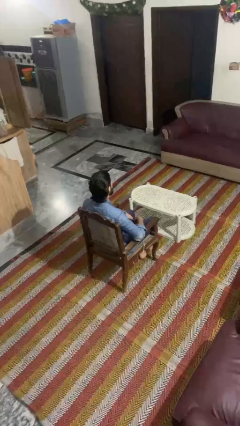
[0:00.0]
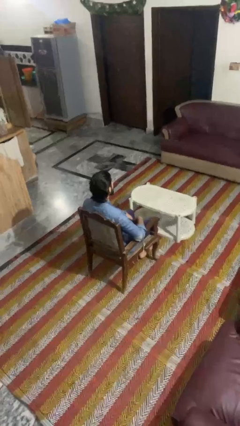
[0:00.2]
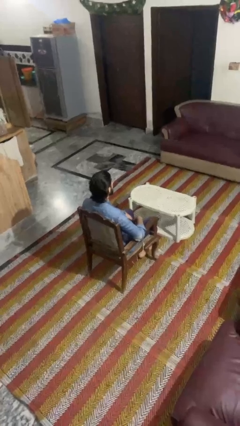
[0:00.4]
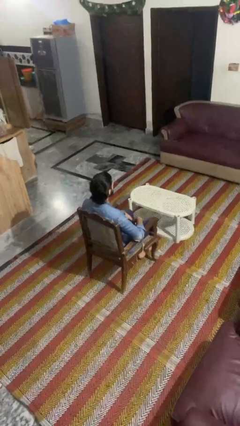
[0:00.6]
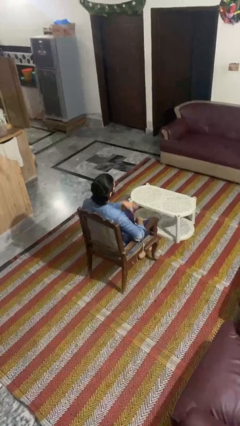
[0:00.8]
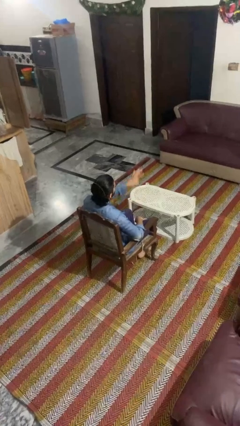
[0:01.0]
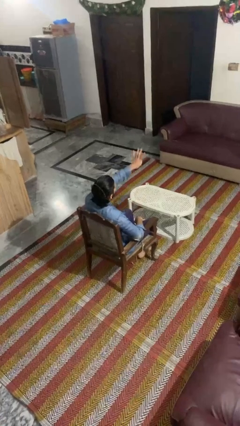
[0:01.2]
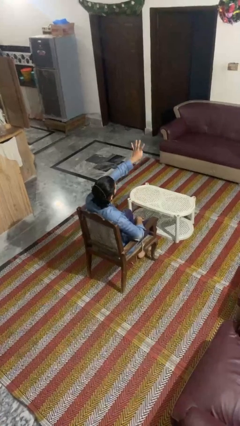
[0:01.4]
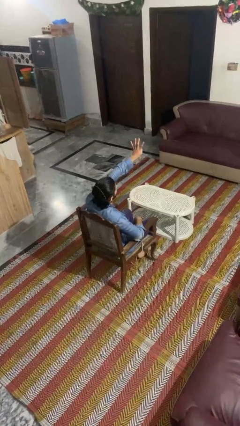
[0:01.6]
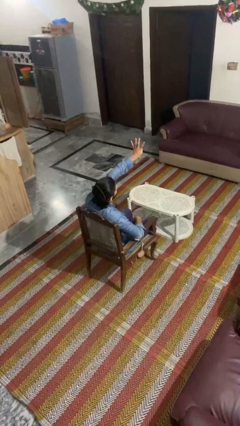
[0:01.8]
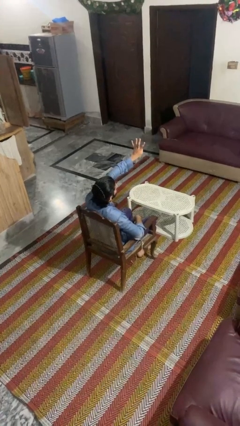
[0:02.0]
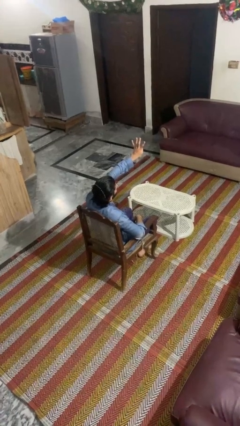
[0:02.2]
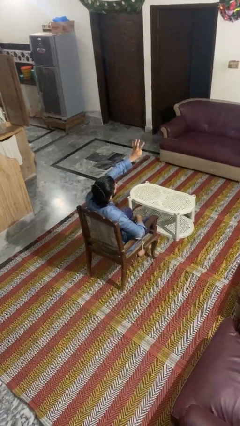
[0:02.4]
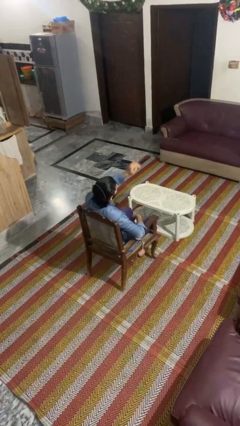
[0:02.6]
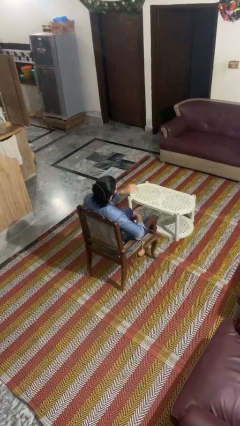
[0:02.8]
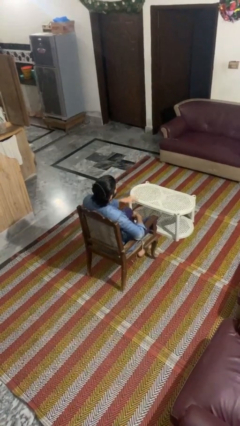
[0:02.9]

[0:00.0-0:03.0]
person gestures number four

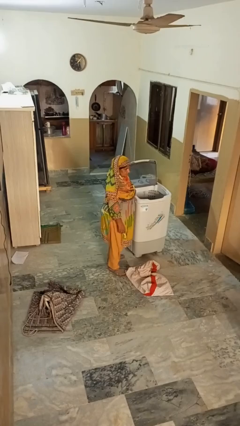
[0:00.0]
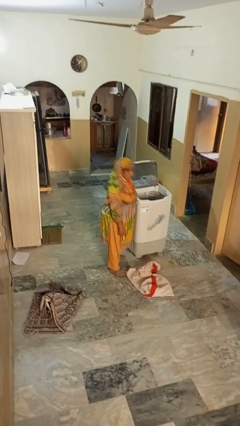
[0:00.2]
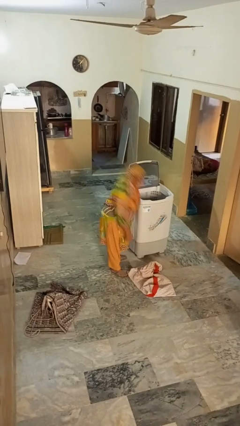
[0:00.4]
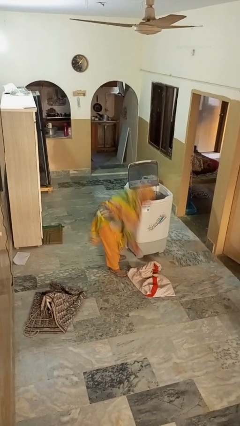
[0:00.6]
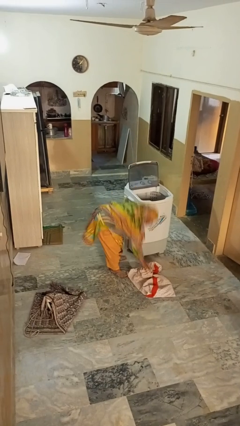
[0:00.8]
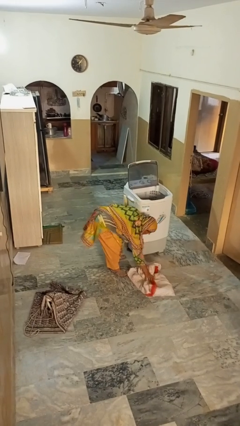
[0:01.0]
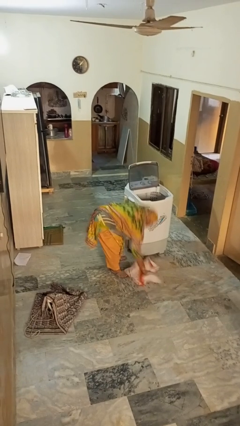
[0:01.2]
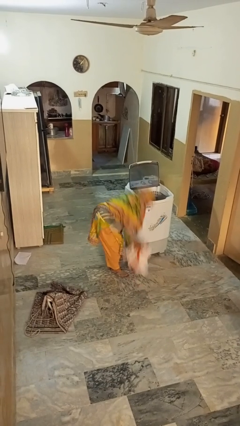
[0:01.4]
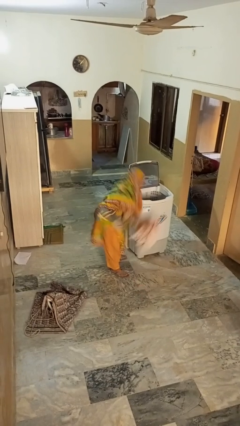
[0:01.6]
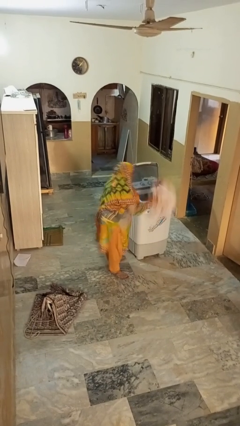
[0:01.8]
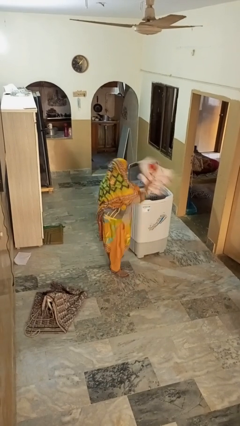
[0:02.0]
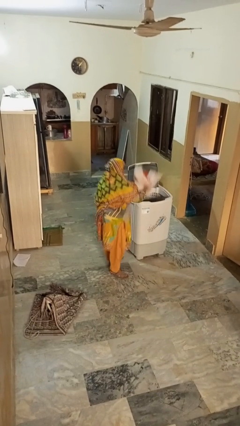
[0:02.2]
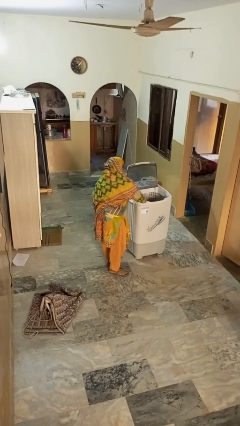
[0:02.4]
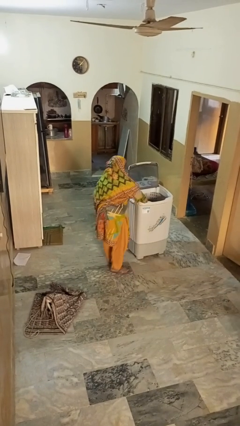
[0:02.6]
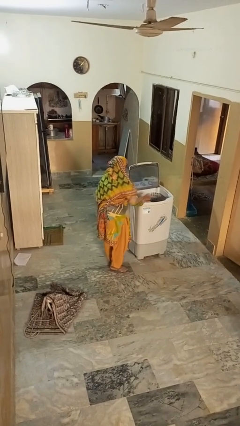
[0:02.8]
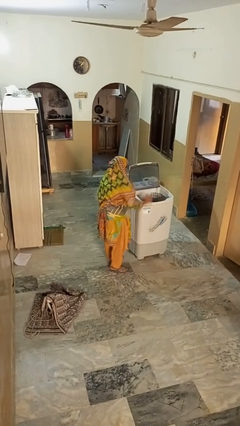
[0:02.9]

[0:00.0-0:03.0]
person loads clotheswasher

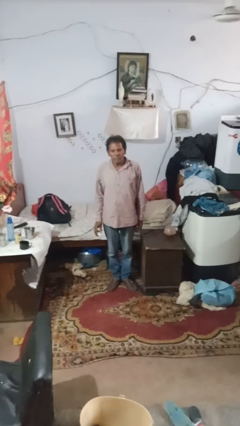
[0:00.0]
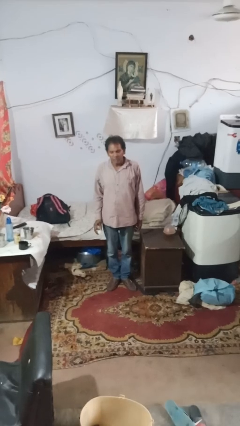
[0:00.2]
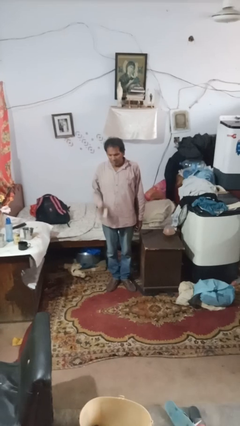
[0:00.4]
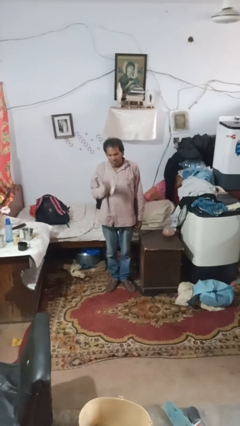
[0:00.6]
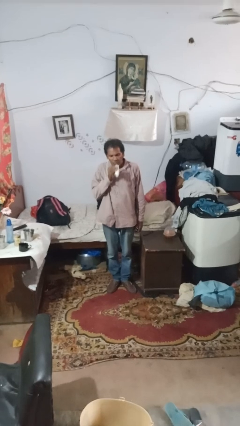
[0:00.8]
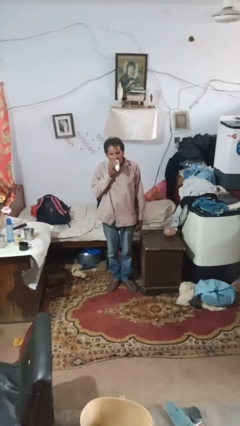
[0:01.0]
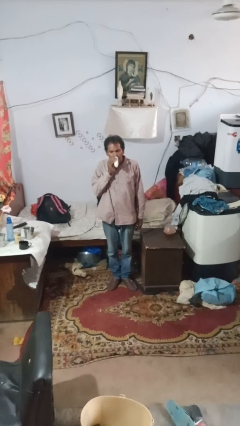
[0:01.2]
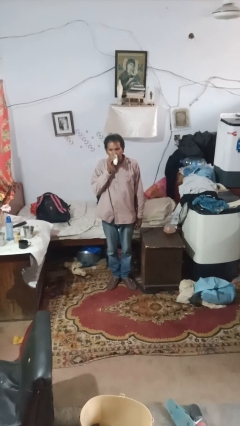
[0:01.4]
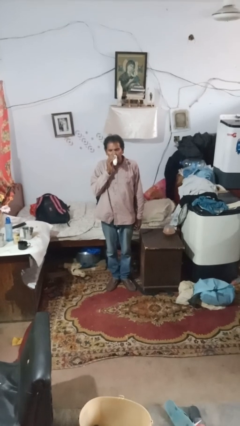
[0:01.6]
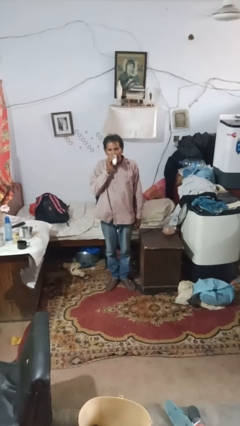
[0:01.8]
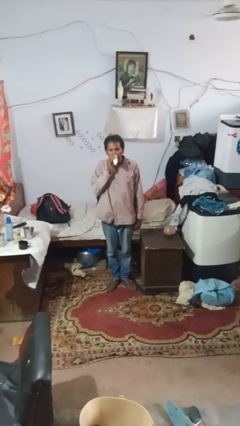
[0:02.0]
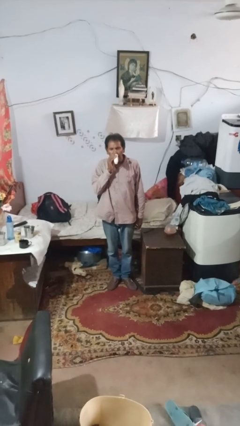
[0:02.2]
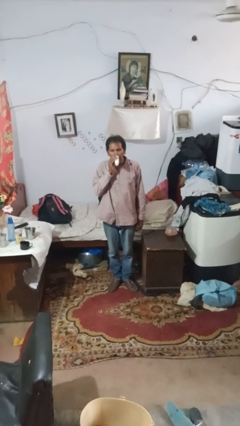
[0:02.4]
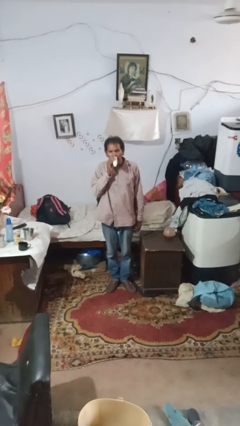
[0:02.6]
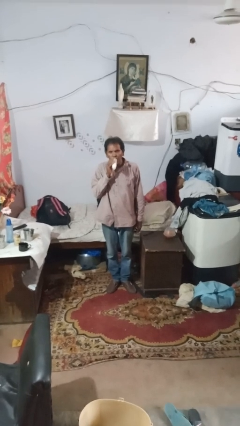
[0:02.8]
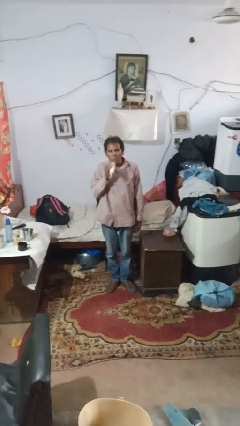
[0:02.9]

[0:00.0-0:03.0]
person vapes

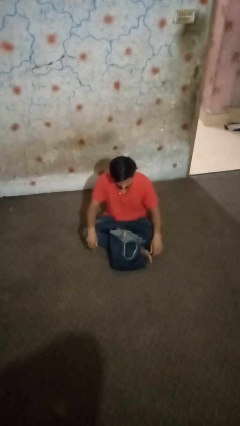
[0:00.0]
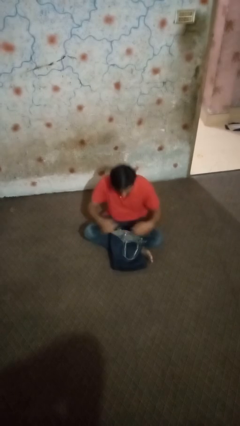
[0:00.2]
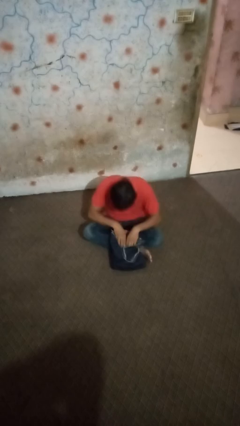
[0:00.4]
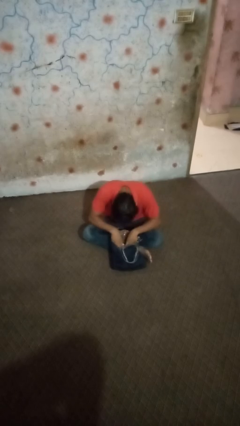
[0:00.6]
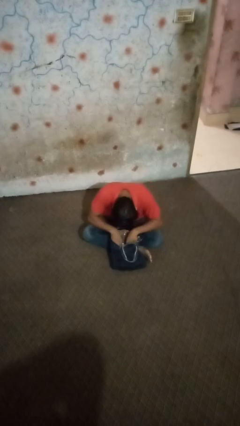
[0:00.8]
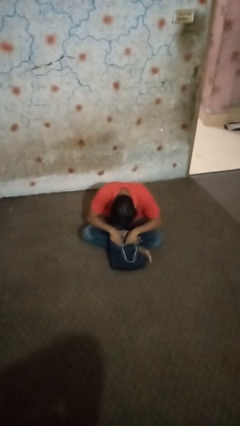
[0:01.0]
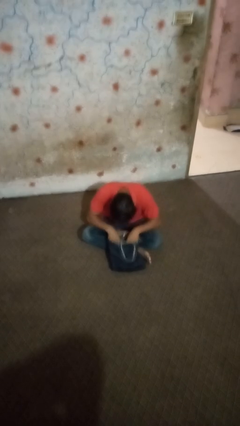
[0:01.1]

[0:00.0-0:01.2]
person searches in bag

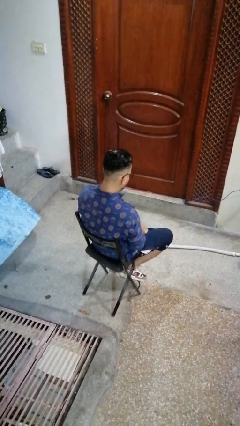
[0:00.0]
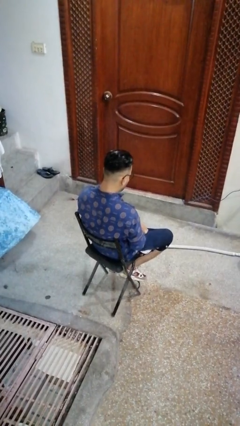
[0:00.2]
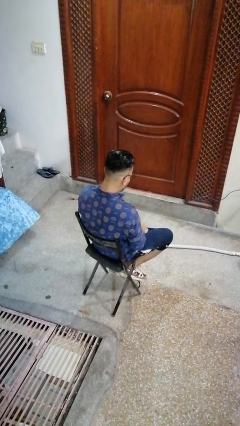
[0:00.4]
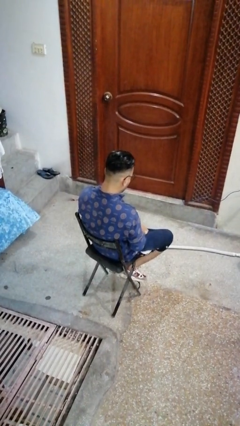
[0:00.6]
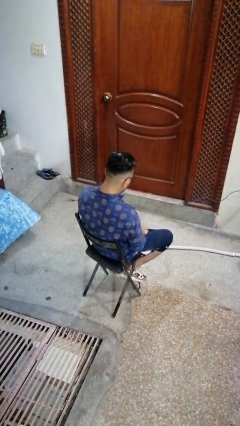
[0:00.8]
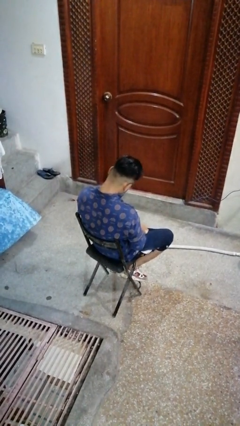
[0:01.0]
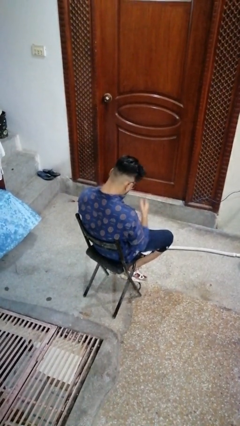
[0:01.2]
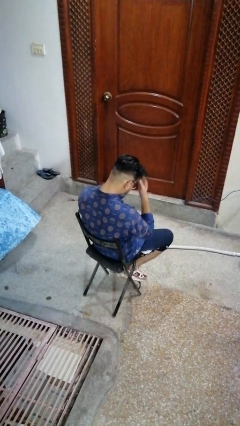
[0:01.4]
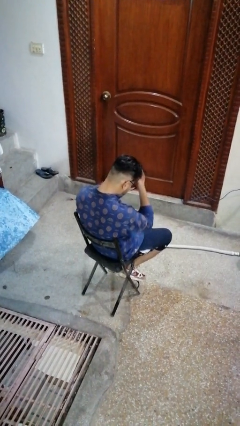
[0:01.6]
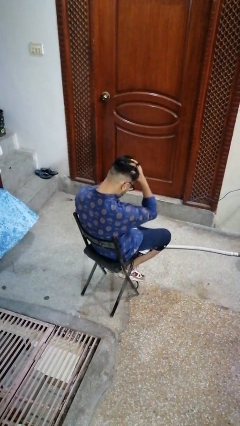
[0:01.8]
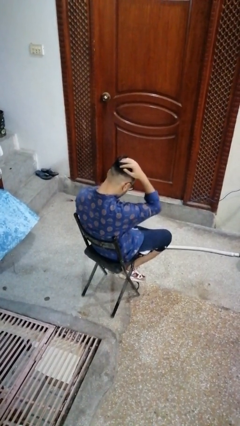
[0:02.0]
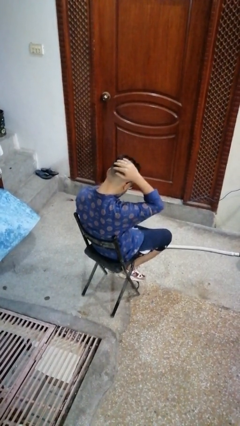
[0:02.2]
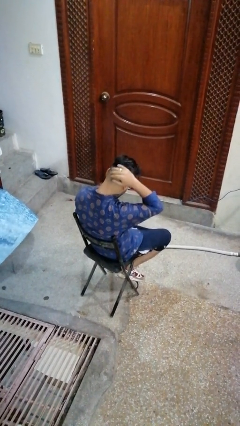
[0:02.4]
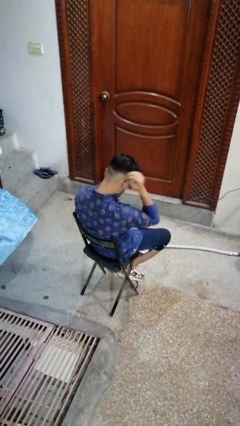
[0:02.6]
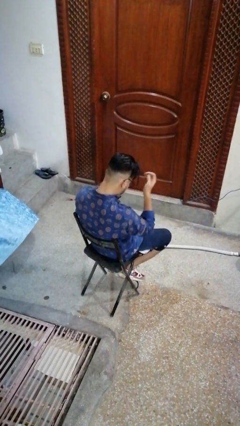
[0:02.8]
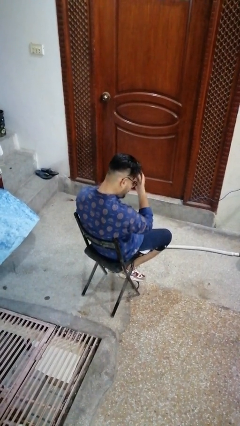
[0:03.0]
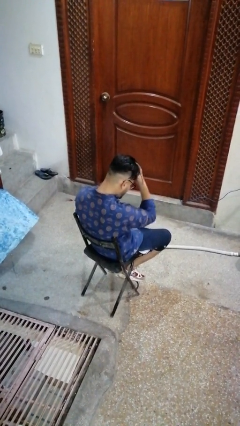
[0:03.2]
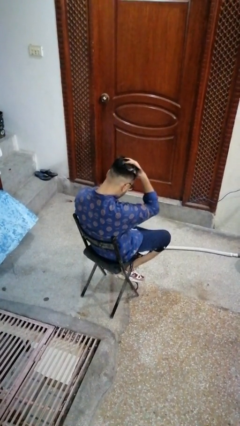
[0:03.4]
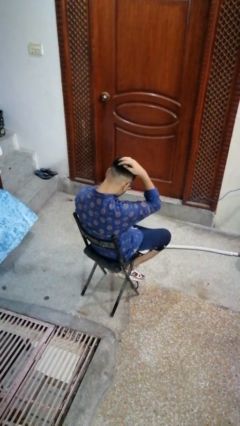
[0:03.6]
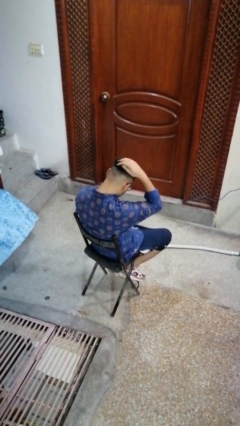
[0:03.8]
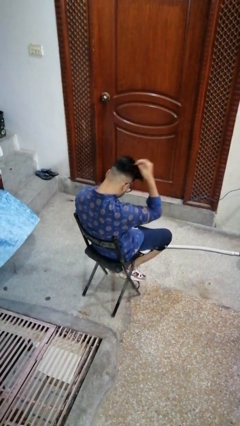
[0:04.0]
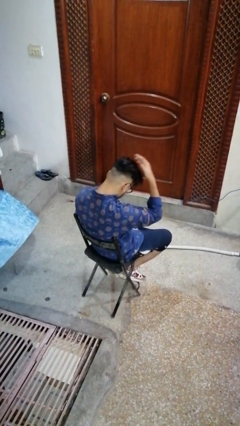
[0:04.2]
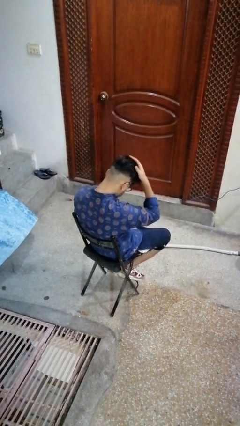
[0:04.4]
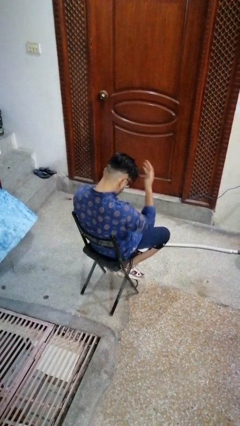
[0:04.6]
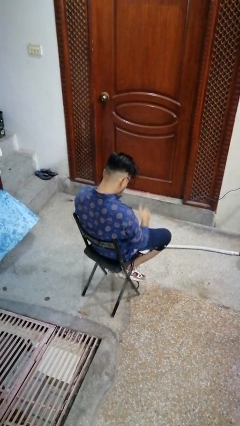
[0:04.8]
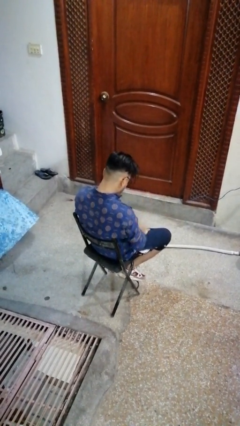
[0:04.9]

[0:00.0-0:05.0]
person strokes hair

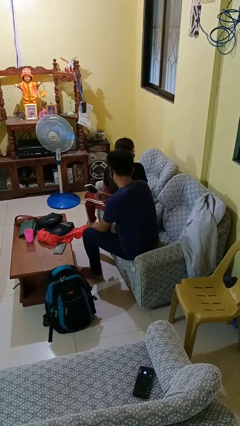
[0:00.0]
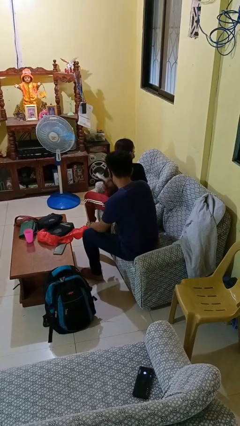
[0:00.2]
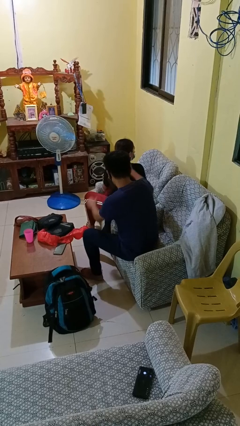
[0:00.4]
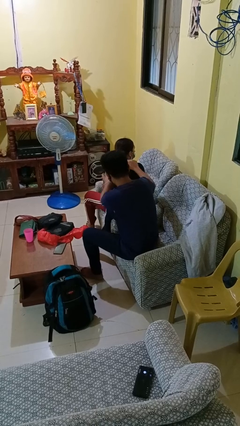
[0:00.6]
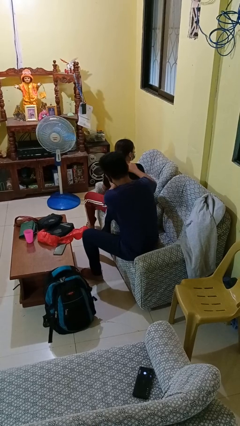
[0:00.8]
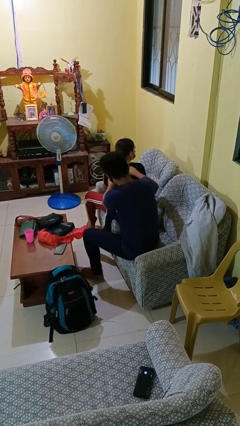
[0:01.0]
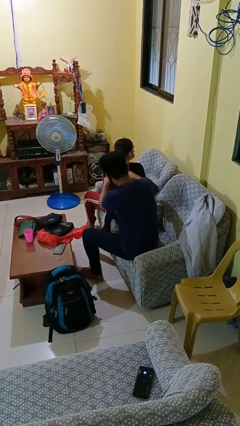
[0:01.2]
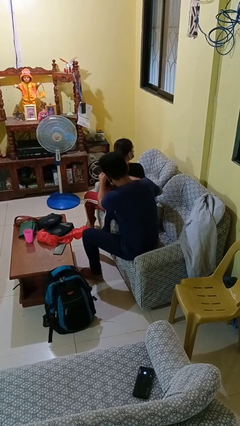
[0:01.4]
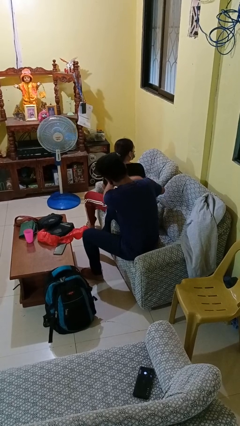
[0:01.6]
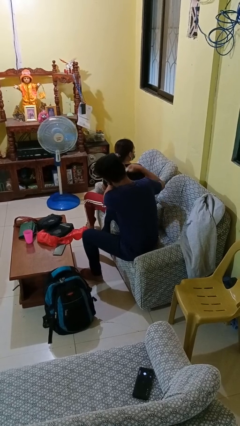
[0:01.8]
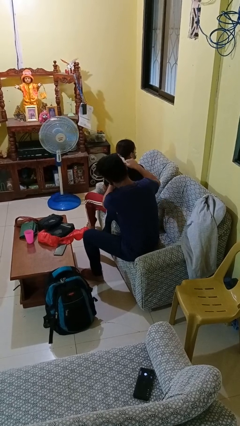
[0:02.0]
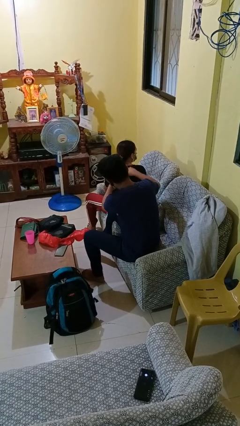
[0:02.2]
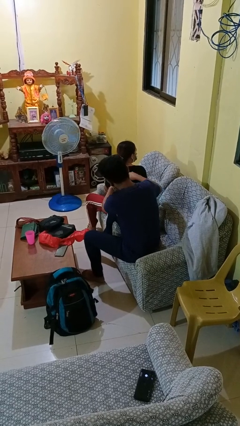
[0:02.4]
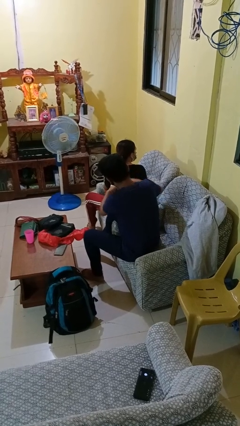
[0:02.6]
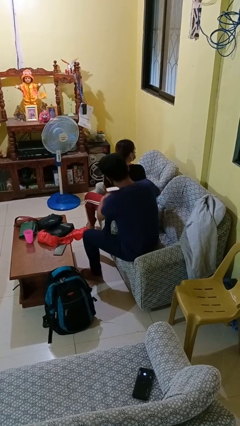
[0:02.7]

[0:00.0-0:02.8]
person brushes hair of person
